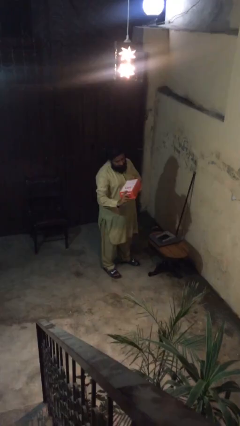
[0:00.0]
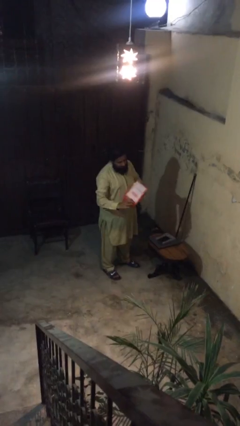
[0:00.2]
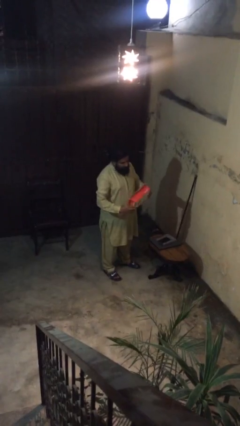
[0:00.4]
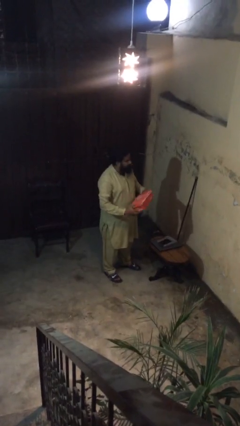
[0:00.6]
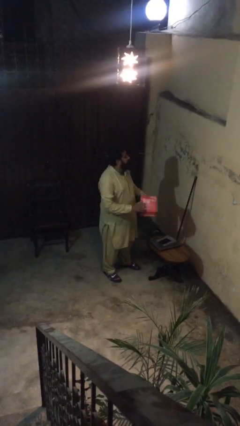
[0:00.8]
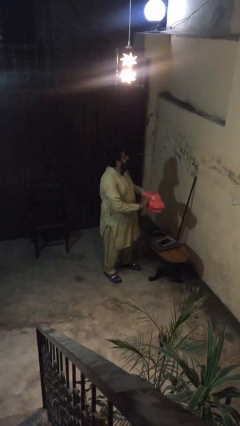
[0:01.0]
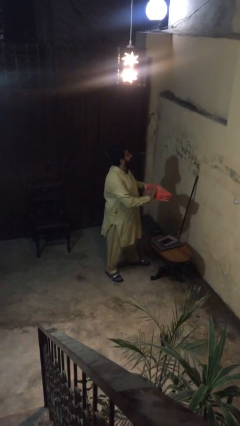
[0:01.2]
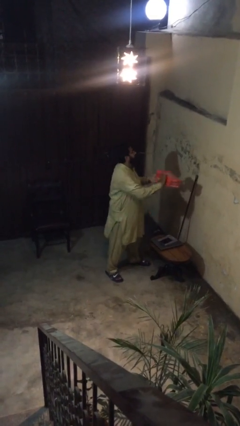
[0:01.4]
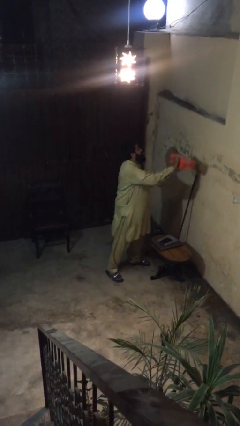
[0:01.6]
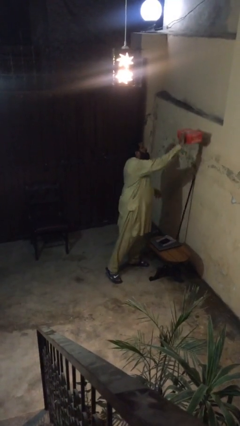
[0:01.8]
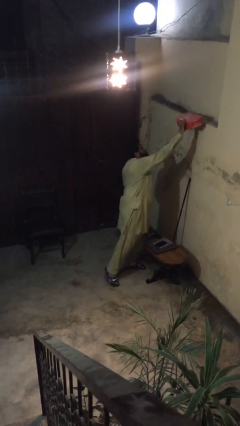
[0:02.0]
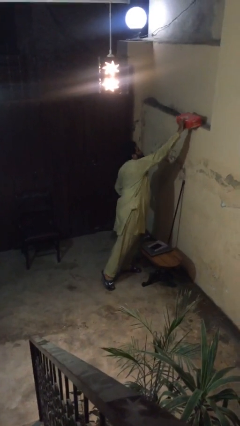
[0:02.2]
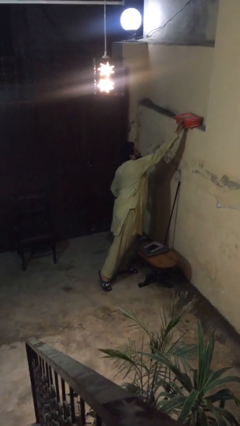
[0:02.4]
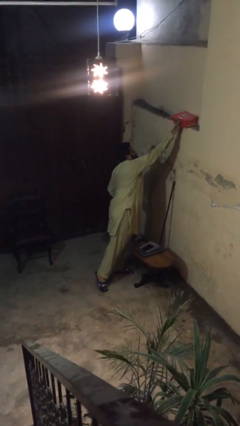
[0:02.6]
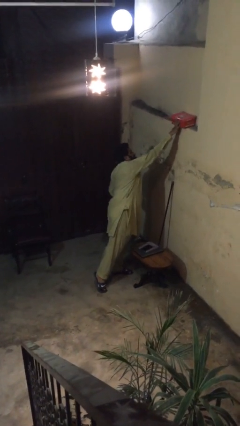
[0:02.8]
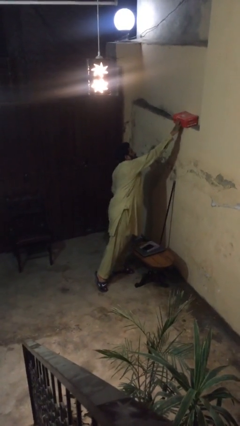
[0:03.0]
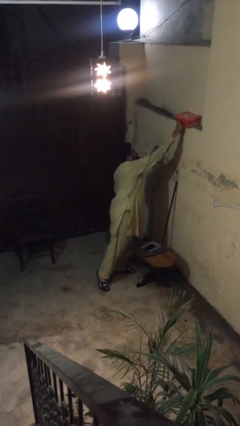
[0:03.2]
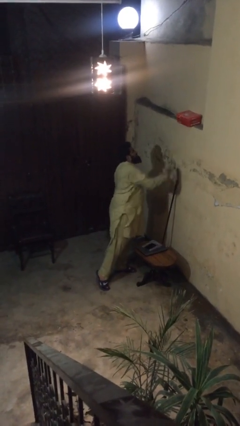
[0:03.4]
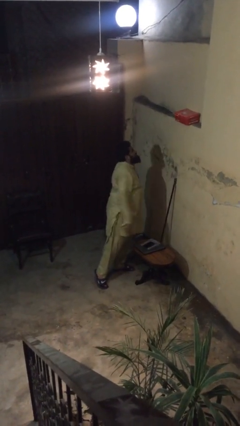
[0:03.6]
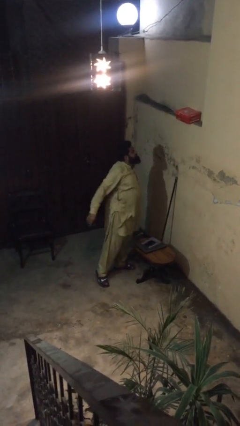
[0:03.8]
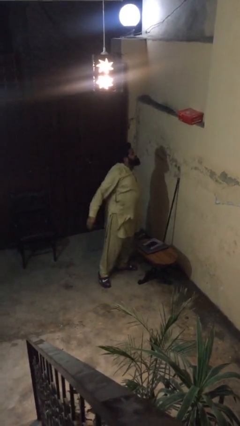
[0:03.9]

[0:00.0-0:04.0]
person puts down object on shelf

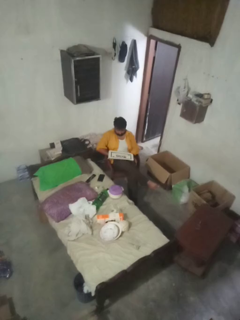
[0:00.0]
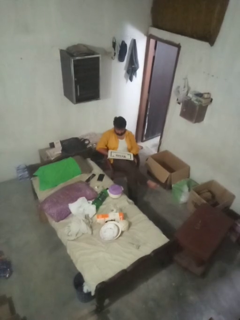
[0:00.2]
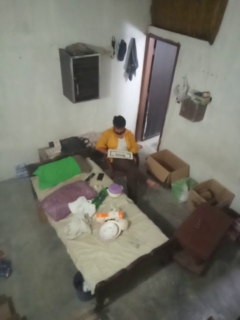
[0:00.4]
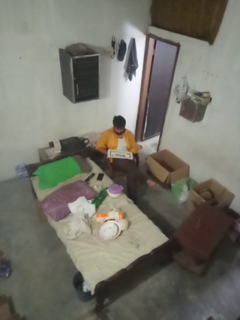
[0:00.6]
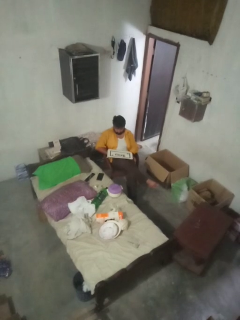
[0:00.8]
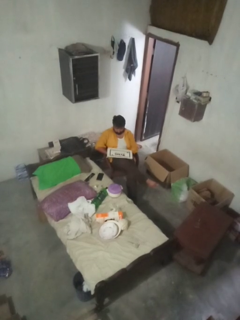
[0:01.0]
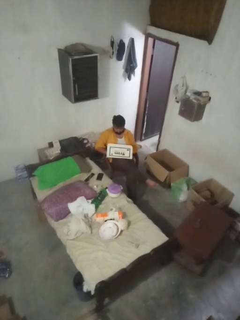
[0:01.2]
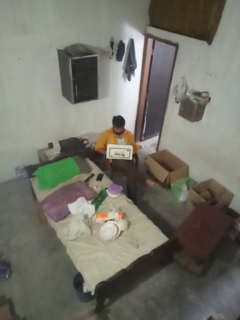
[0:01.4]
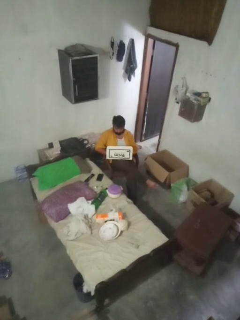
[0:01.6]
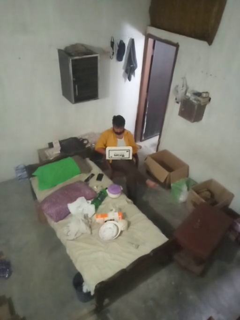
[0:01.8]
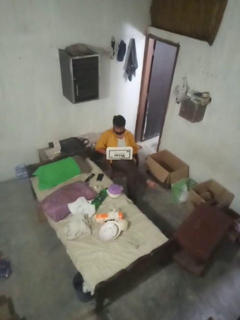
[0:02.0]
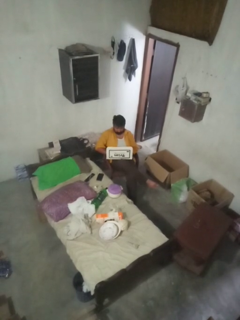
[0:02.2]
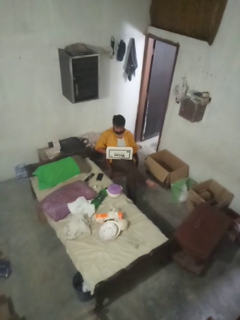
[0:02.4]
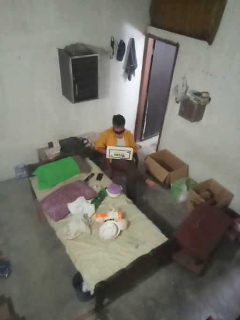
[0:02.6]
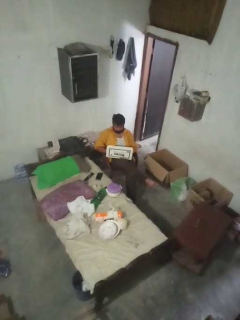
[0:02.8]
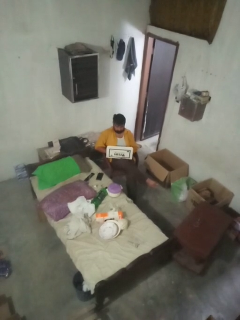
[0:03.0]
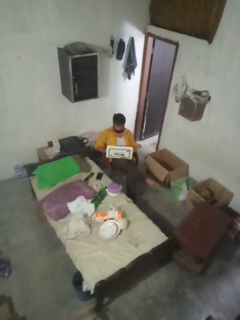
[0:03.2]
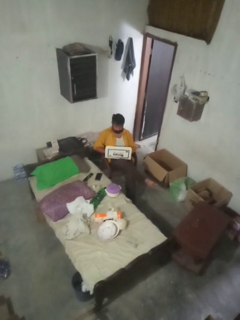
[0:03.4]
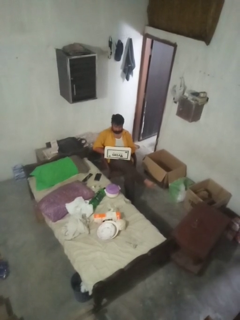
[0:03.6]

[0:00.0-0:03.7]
person opens laptop

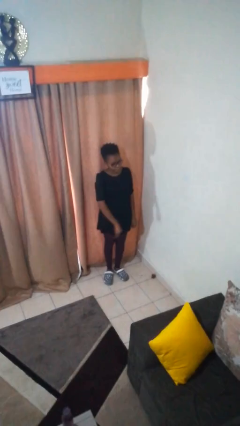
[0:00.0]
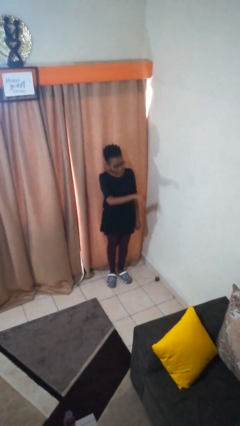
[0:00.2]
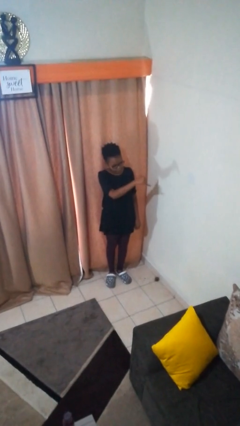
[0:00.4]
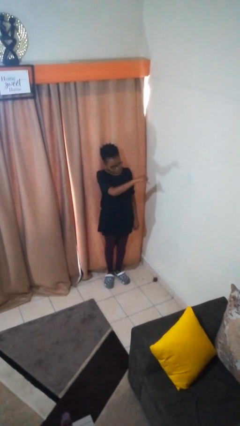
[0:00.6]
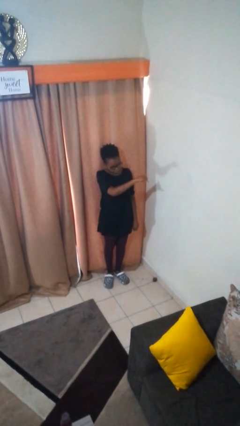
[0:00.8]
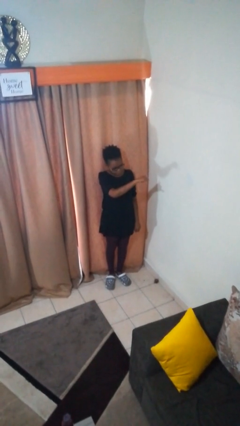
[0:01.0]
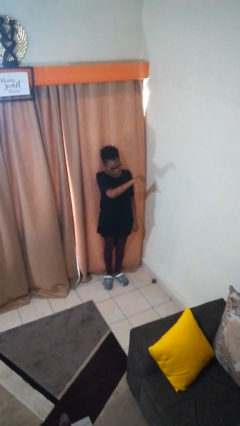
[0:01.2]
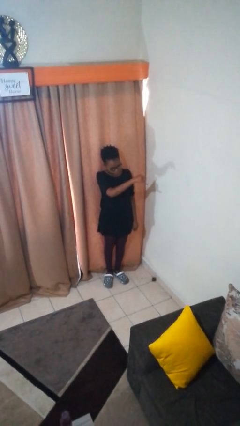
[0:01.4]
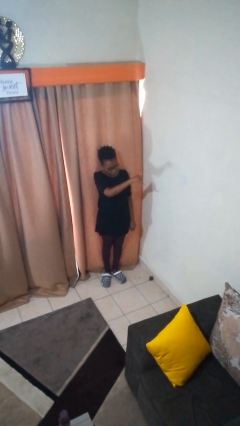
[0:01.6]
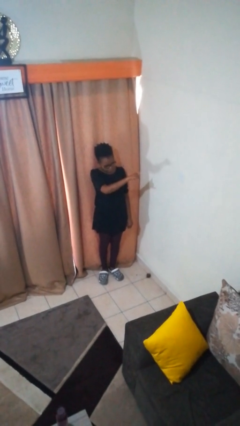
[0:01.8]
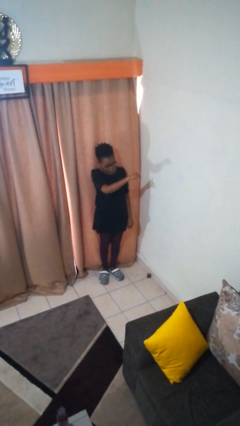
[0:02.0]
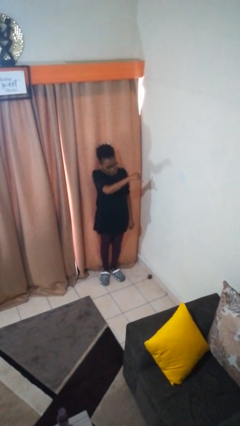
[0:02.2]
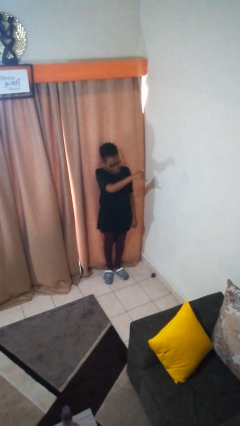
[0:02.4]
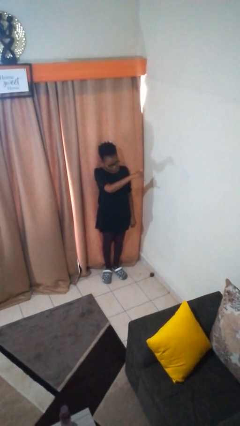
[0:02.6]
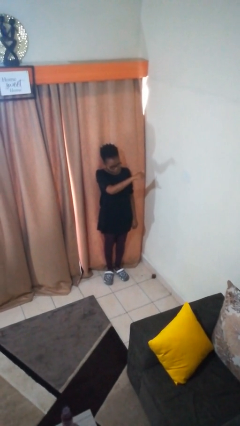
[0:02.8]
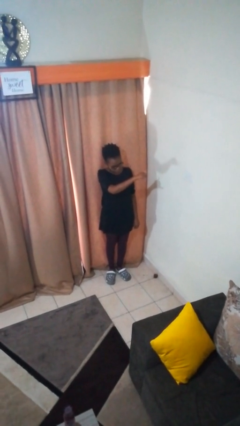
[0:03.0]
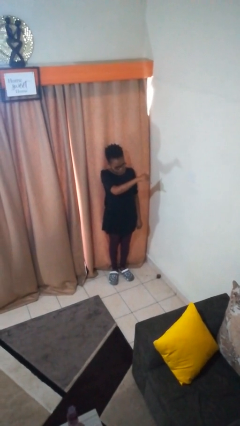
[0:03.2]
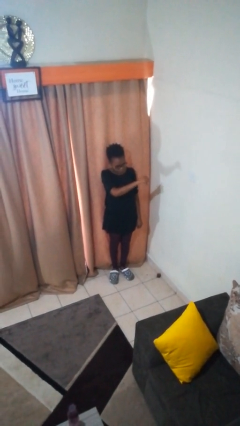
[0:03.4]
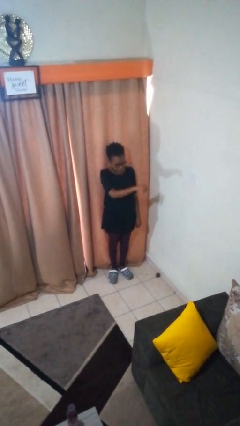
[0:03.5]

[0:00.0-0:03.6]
person gestures hang loose

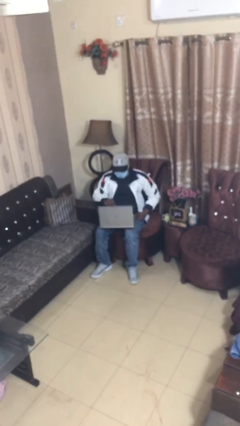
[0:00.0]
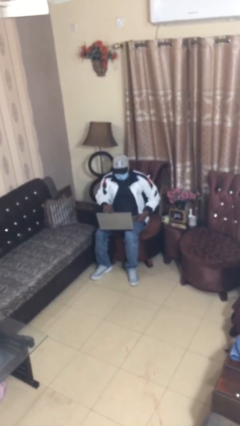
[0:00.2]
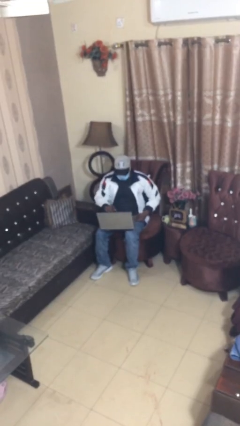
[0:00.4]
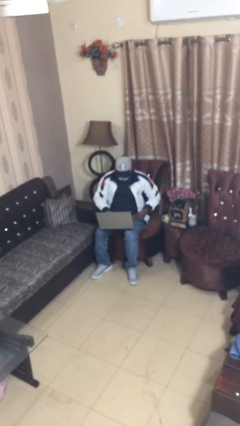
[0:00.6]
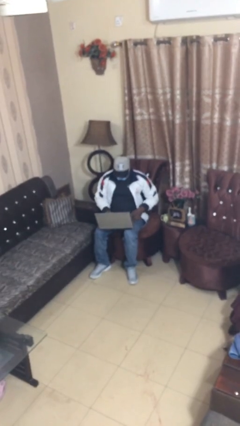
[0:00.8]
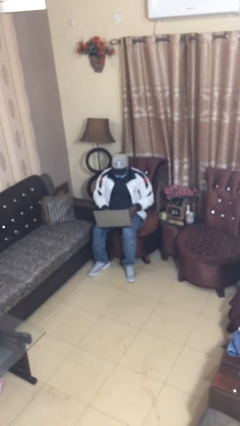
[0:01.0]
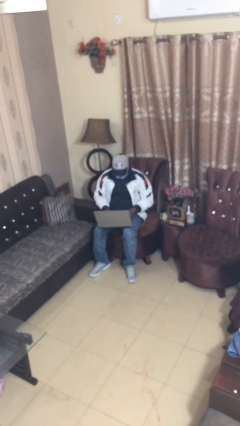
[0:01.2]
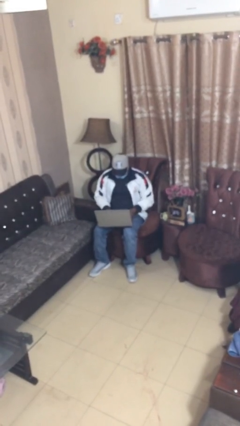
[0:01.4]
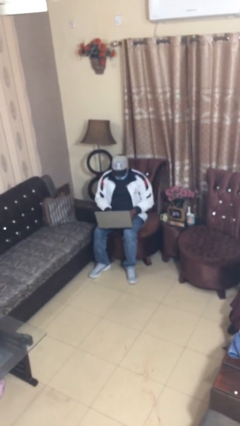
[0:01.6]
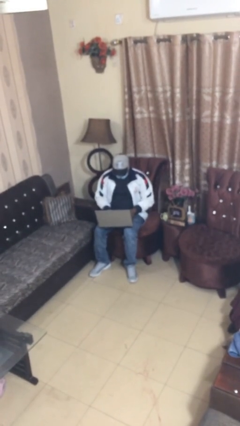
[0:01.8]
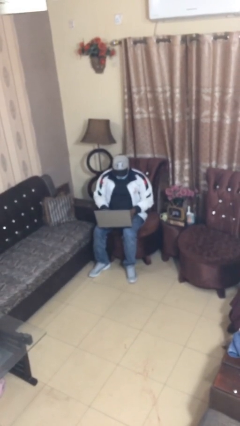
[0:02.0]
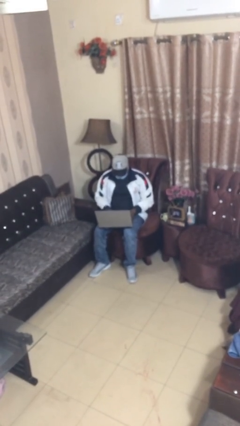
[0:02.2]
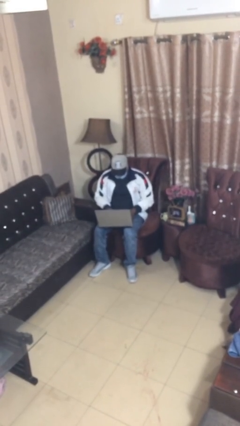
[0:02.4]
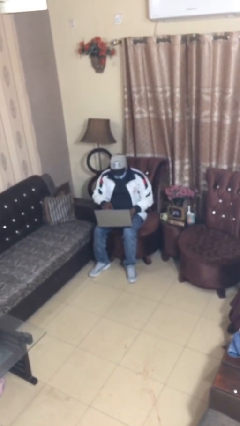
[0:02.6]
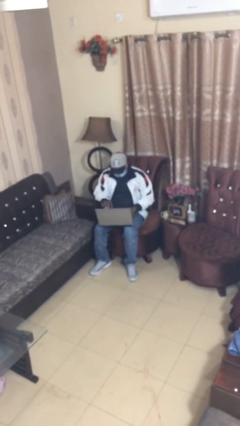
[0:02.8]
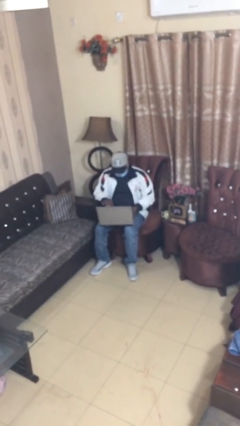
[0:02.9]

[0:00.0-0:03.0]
person interacts with laptop

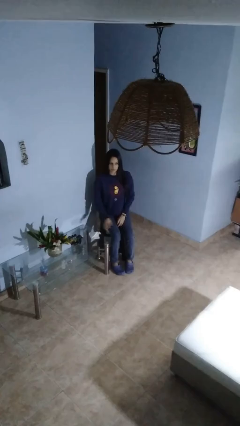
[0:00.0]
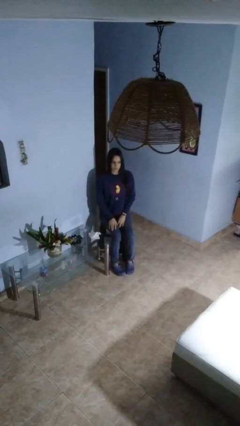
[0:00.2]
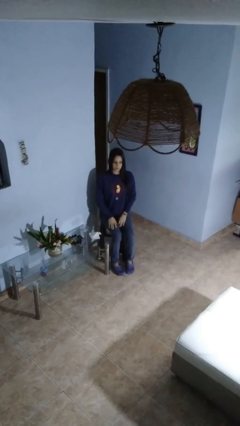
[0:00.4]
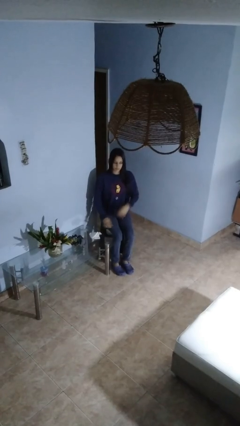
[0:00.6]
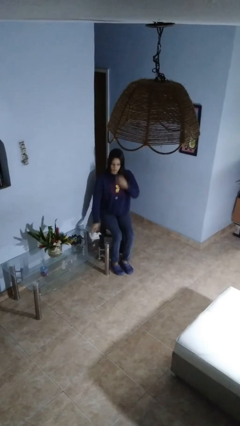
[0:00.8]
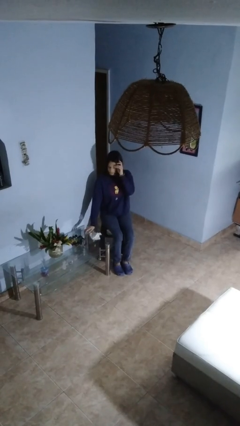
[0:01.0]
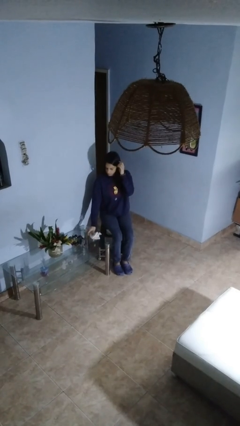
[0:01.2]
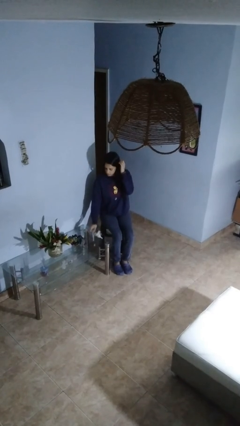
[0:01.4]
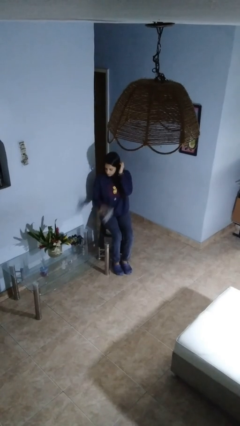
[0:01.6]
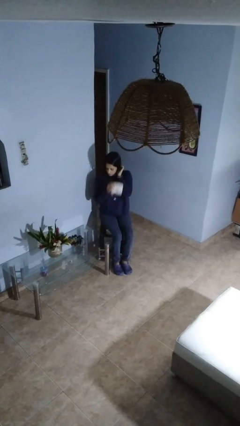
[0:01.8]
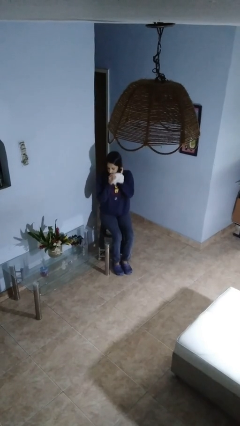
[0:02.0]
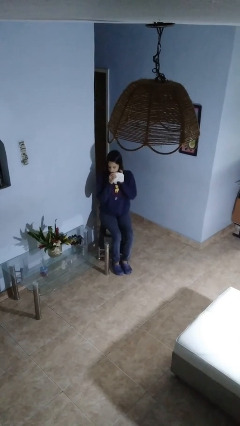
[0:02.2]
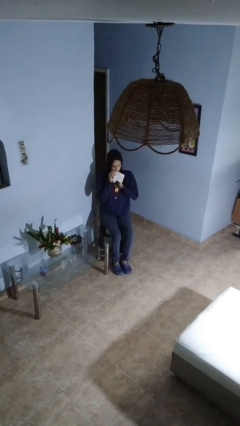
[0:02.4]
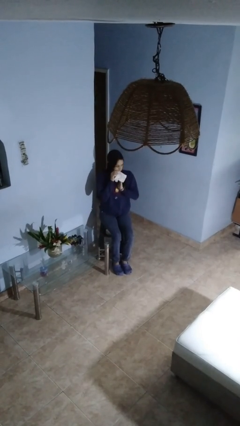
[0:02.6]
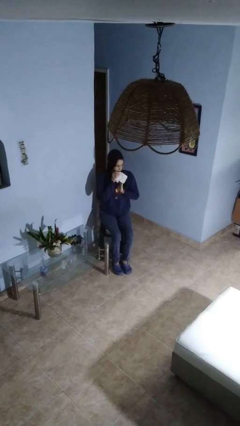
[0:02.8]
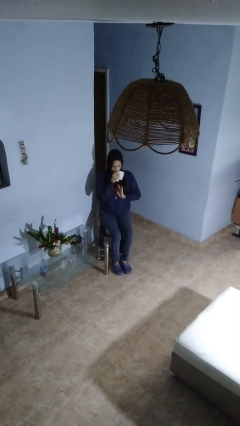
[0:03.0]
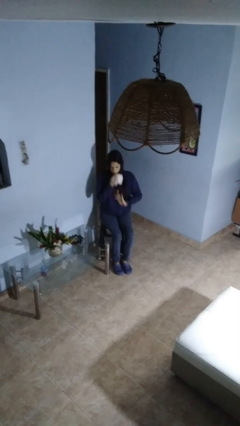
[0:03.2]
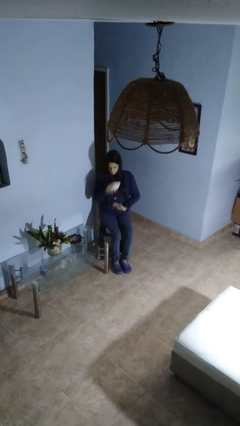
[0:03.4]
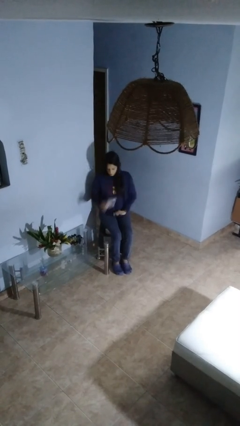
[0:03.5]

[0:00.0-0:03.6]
person wipes mouth with napkin

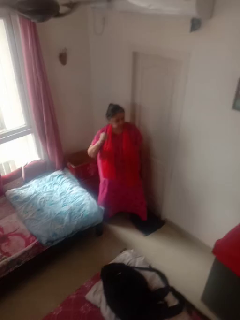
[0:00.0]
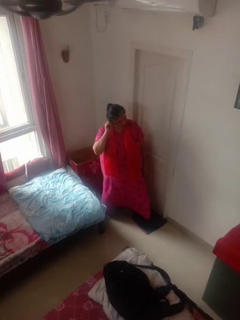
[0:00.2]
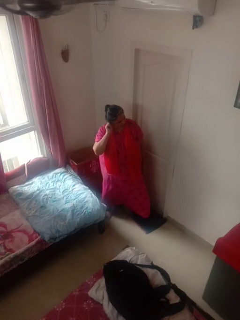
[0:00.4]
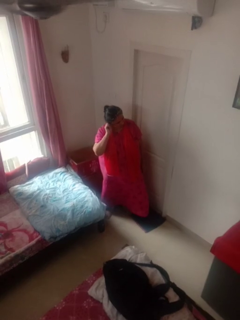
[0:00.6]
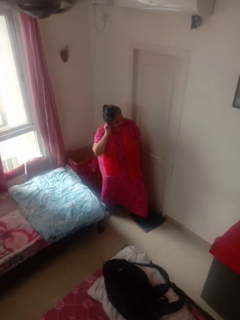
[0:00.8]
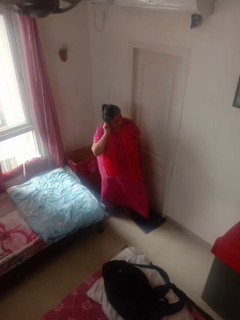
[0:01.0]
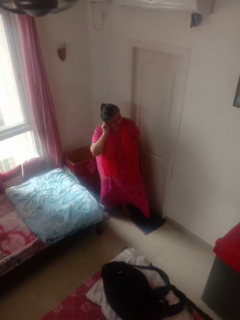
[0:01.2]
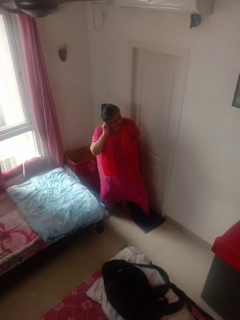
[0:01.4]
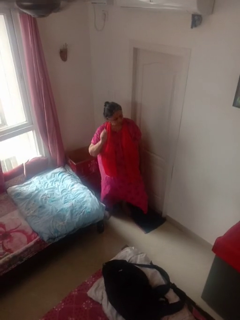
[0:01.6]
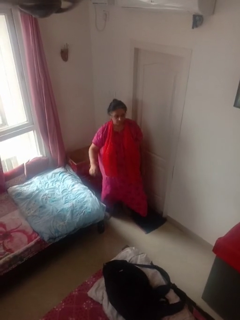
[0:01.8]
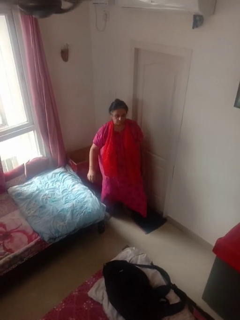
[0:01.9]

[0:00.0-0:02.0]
person touches earlobe
